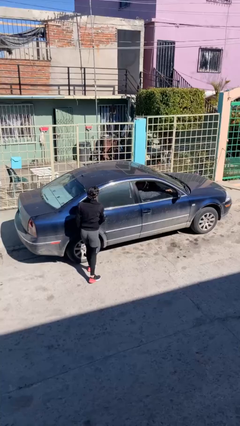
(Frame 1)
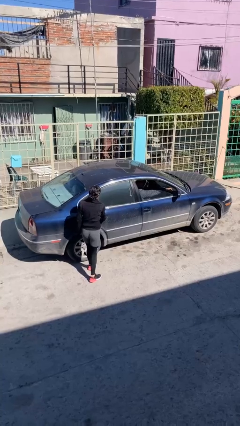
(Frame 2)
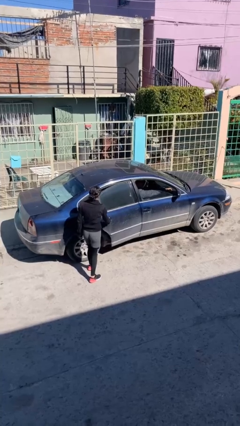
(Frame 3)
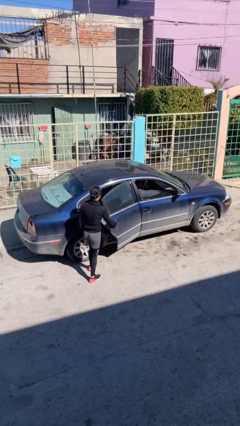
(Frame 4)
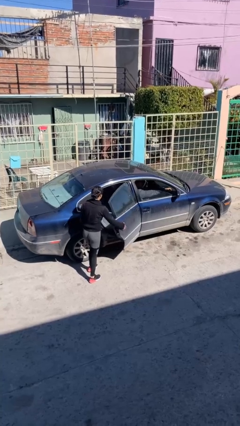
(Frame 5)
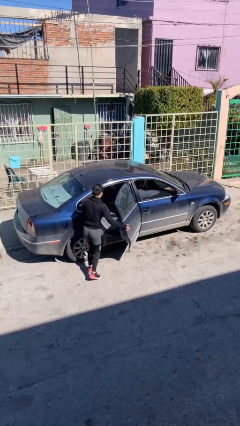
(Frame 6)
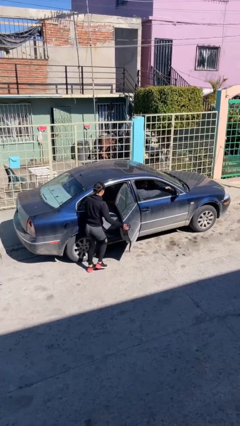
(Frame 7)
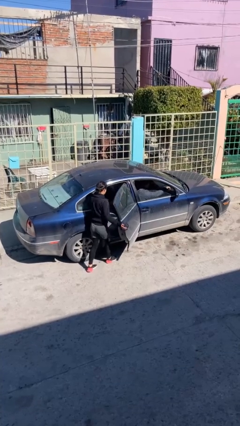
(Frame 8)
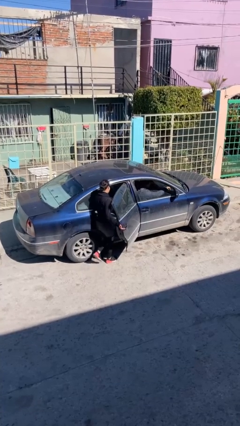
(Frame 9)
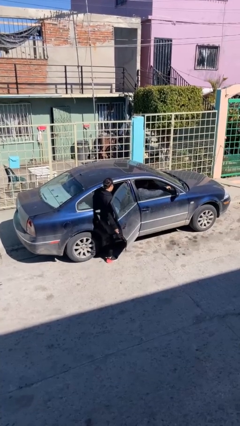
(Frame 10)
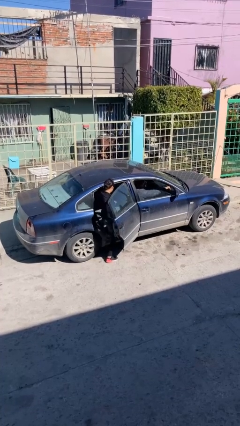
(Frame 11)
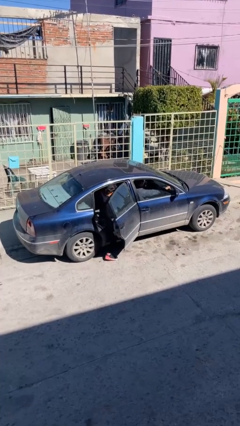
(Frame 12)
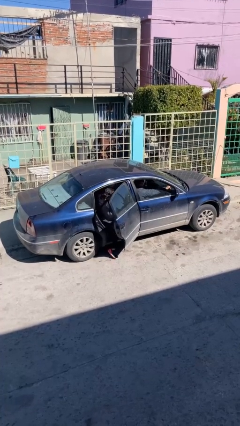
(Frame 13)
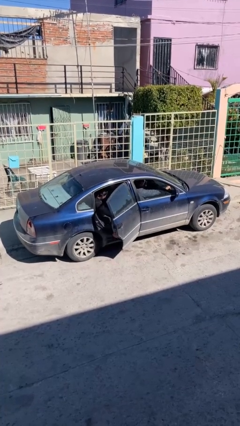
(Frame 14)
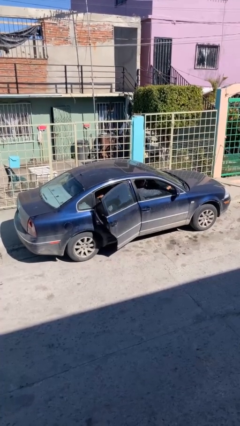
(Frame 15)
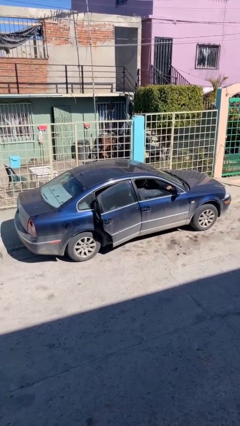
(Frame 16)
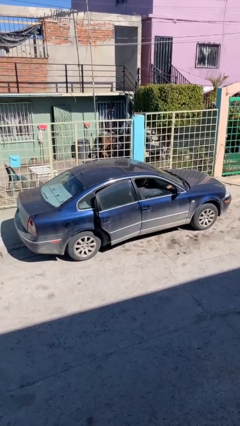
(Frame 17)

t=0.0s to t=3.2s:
car picks up person

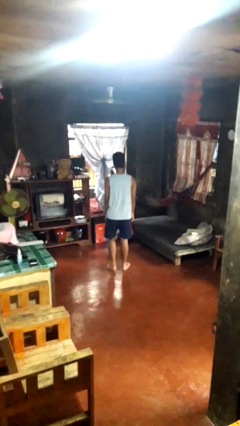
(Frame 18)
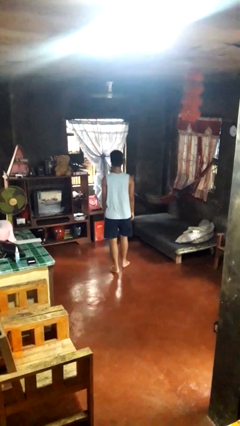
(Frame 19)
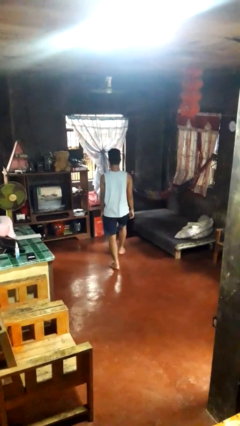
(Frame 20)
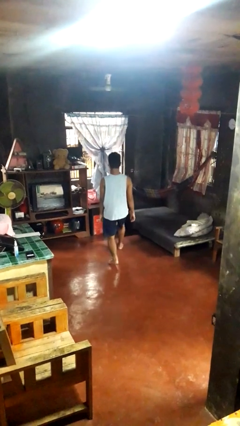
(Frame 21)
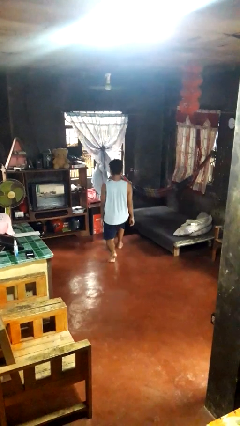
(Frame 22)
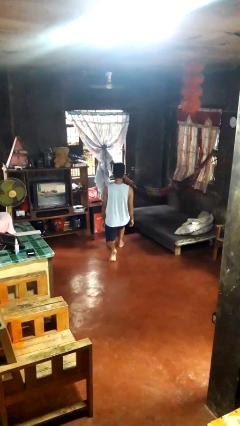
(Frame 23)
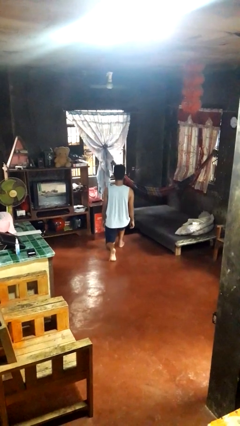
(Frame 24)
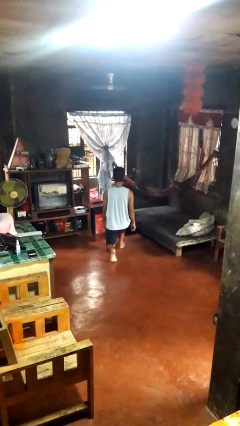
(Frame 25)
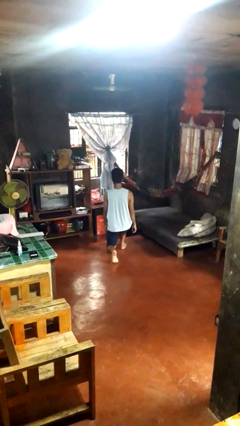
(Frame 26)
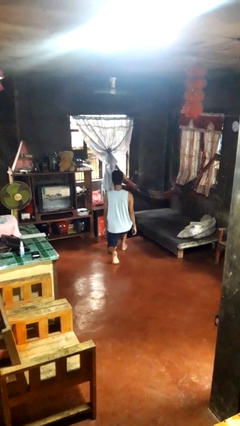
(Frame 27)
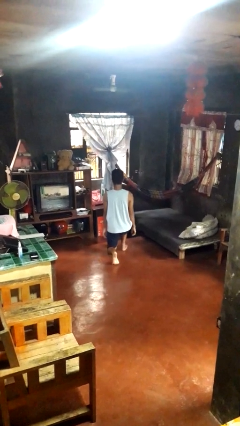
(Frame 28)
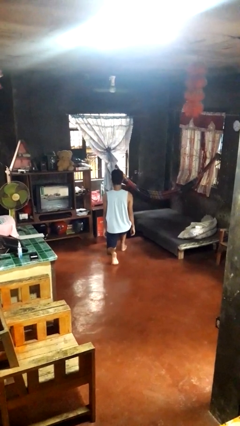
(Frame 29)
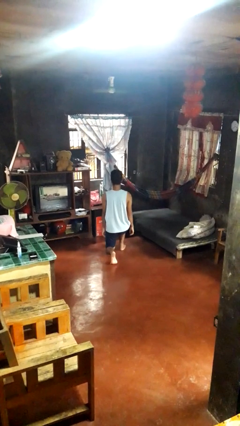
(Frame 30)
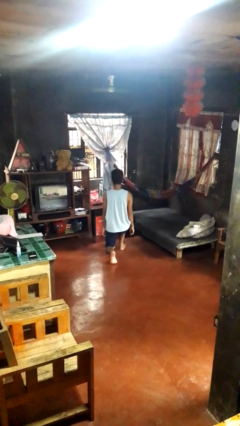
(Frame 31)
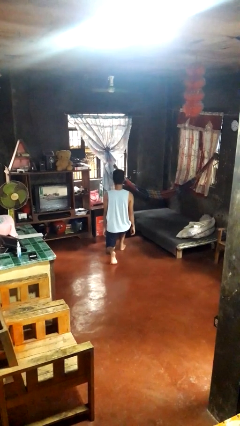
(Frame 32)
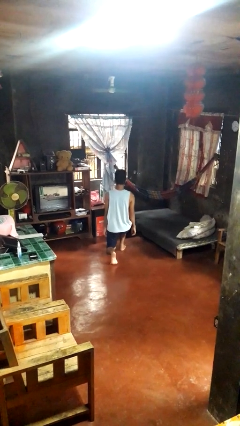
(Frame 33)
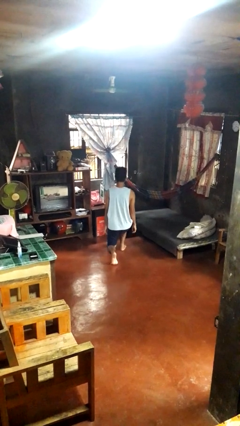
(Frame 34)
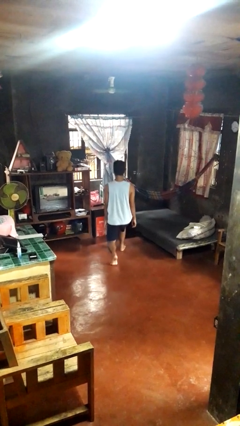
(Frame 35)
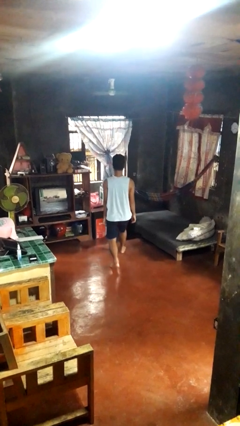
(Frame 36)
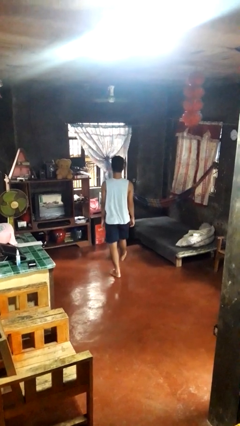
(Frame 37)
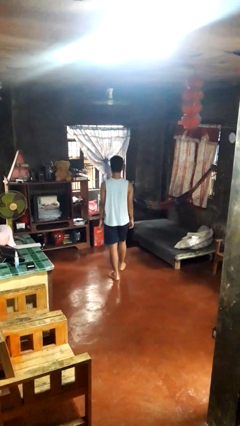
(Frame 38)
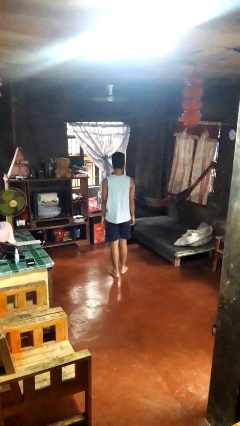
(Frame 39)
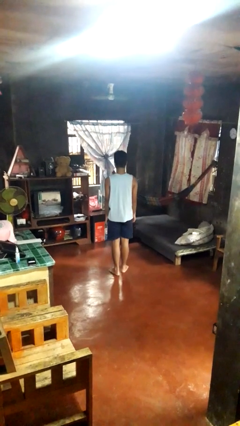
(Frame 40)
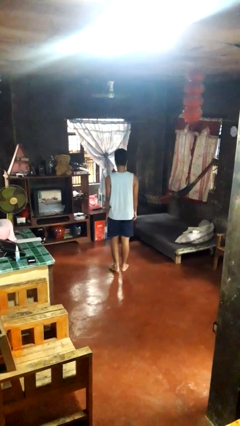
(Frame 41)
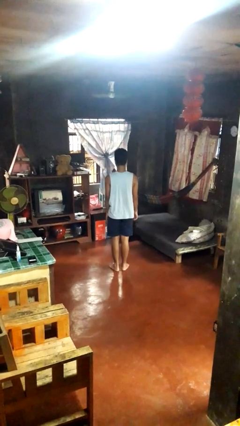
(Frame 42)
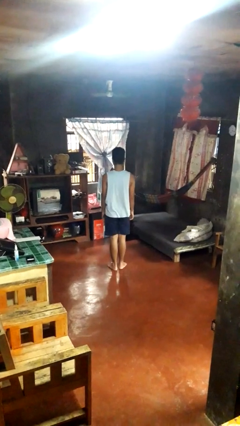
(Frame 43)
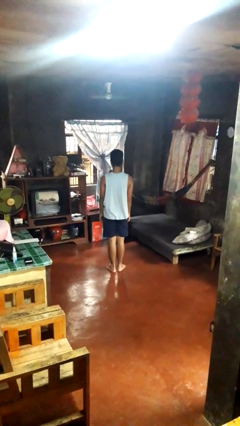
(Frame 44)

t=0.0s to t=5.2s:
person exercises with lunges

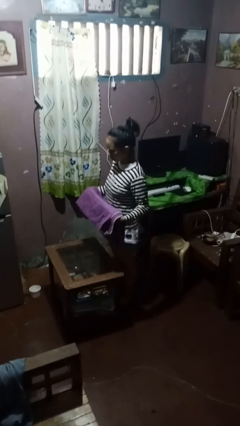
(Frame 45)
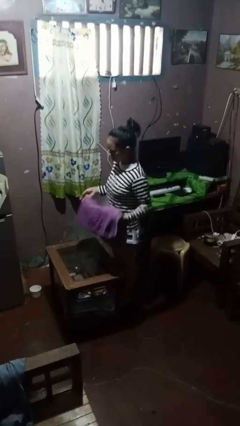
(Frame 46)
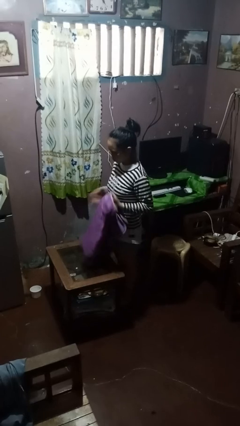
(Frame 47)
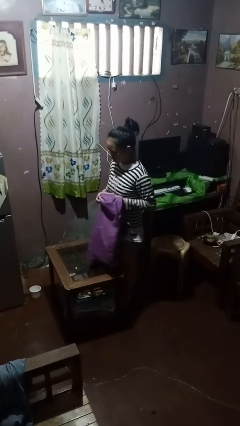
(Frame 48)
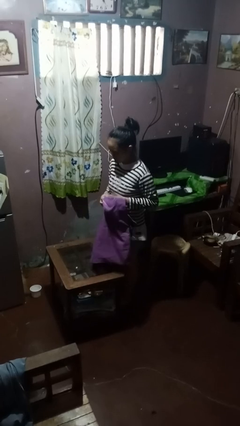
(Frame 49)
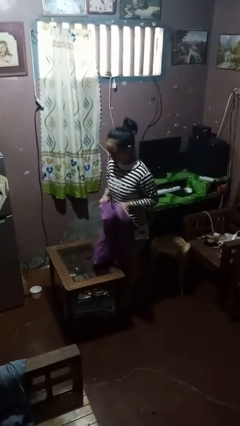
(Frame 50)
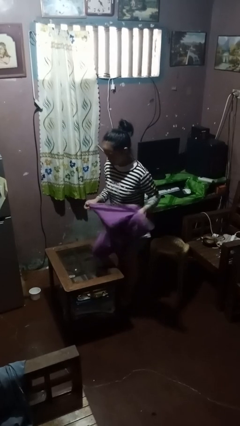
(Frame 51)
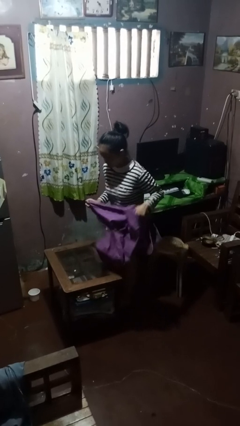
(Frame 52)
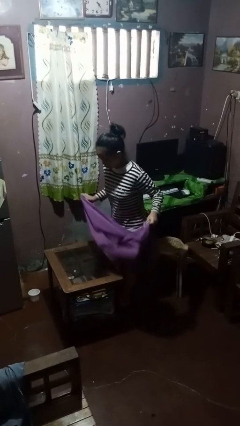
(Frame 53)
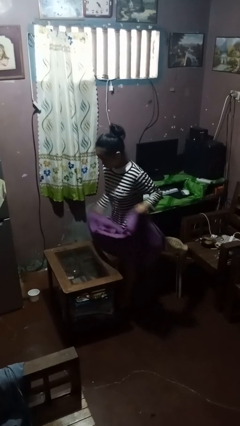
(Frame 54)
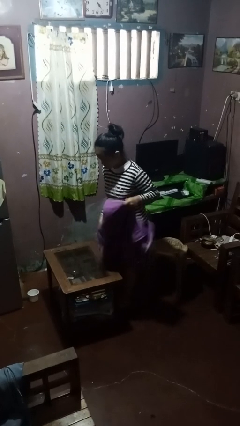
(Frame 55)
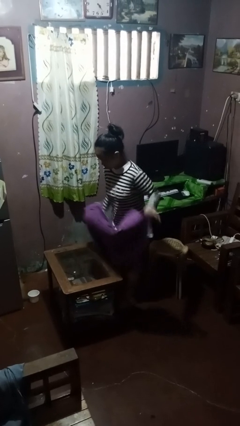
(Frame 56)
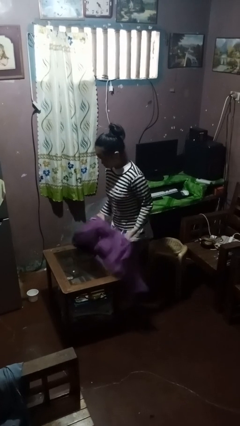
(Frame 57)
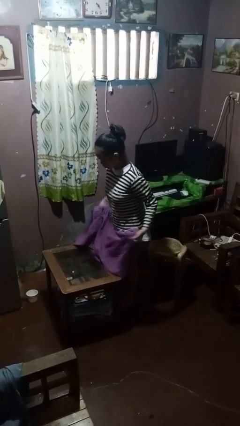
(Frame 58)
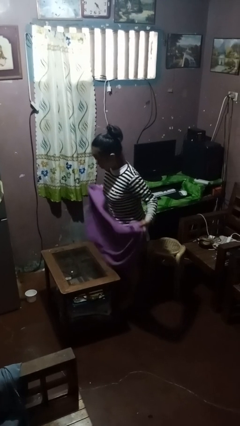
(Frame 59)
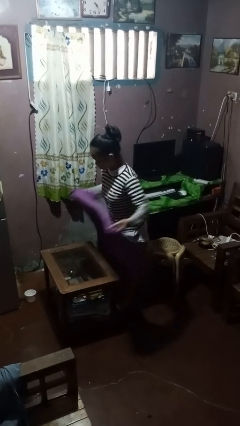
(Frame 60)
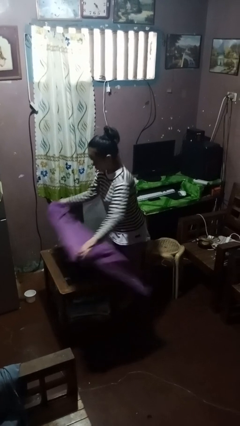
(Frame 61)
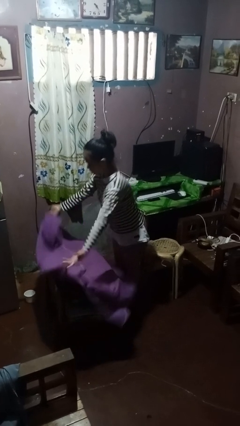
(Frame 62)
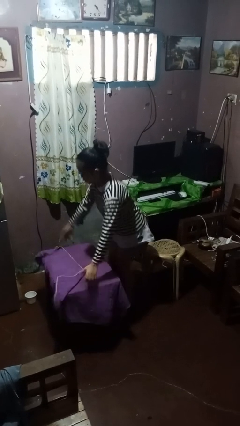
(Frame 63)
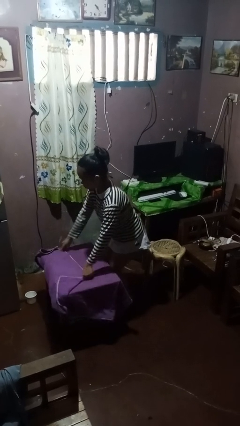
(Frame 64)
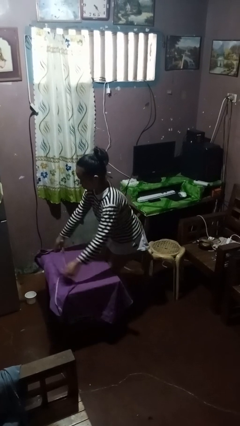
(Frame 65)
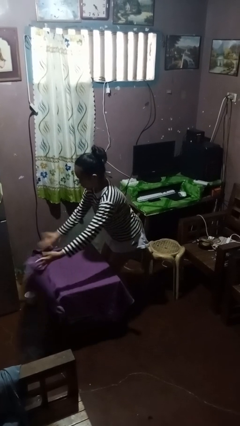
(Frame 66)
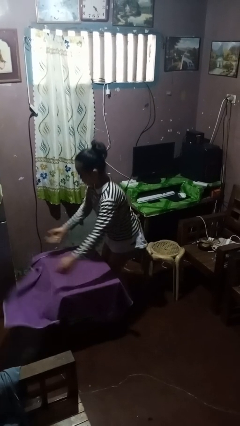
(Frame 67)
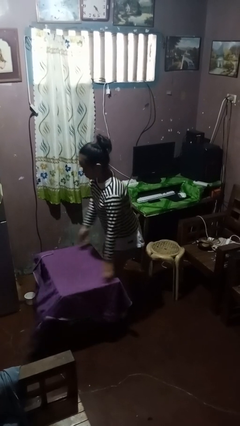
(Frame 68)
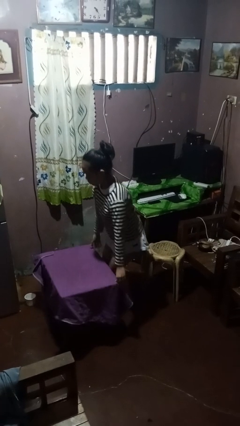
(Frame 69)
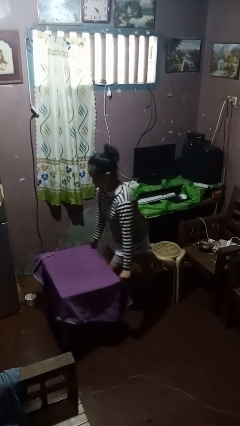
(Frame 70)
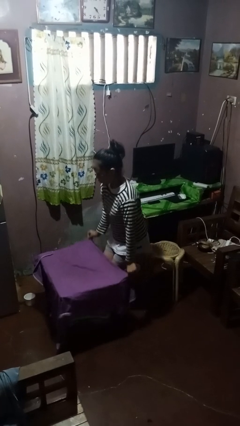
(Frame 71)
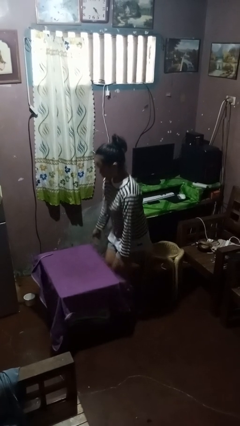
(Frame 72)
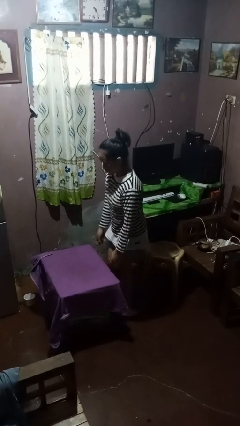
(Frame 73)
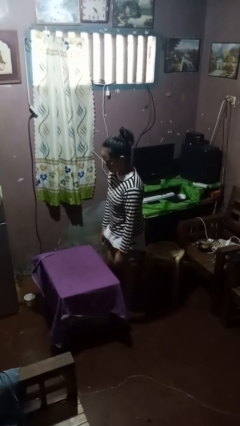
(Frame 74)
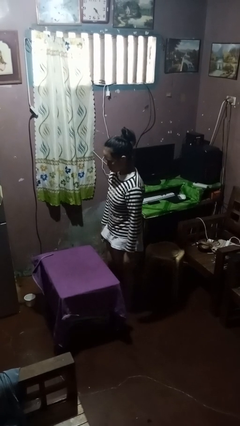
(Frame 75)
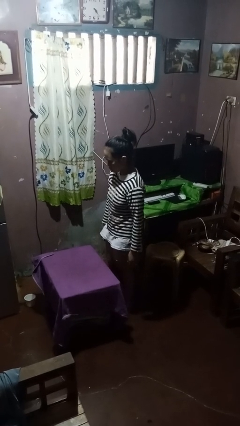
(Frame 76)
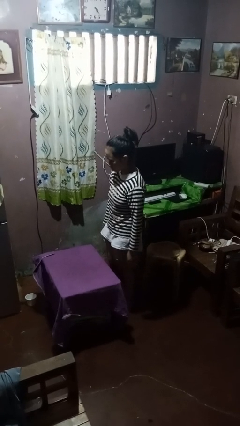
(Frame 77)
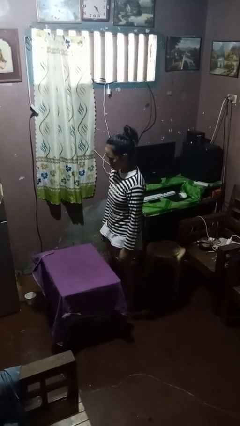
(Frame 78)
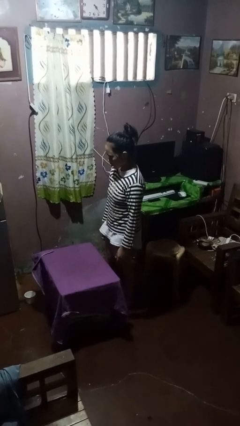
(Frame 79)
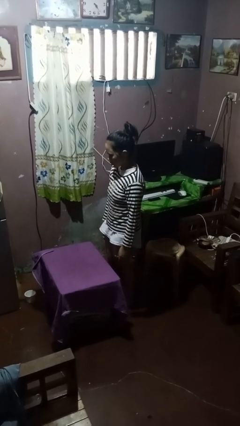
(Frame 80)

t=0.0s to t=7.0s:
person spreads tablecloth

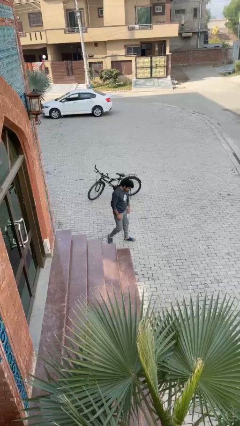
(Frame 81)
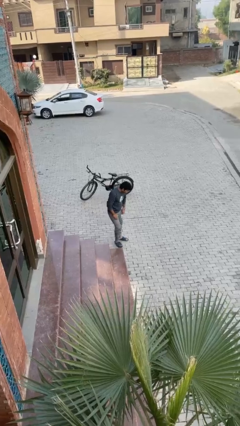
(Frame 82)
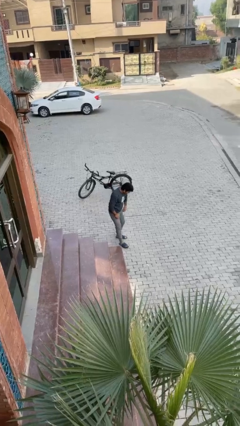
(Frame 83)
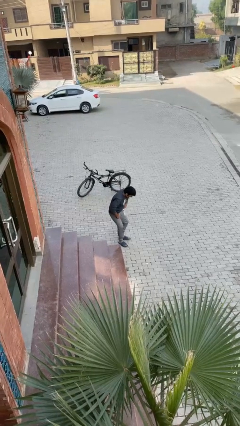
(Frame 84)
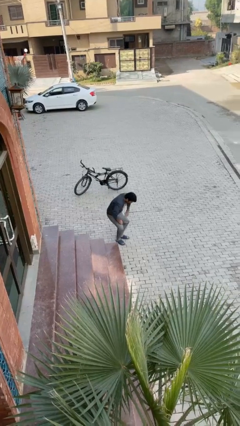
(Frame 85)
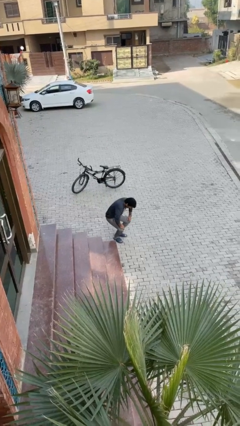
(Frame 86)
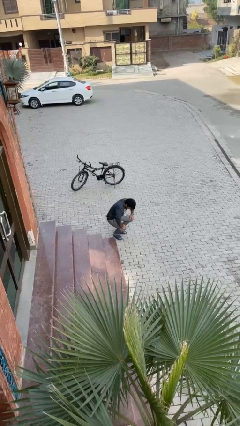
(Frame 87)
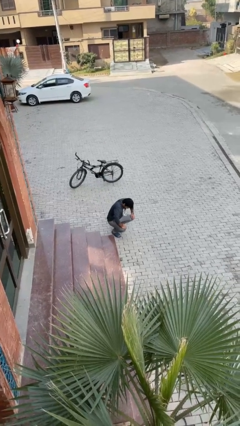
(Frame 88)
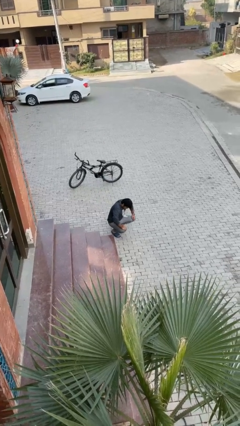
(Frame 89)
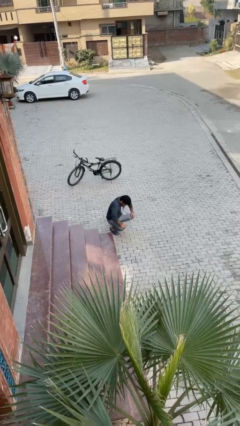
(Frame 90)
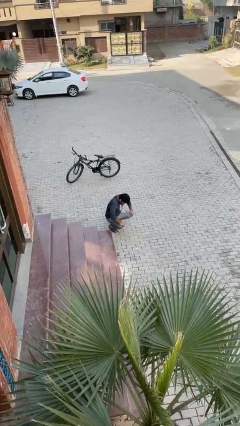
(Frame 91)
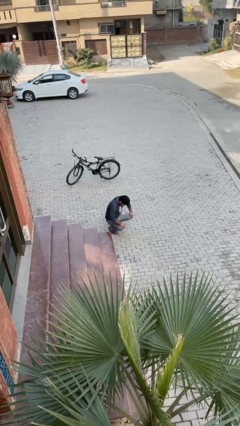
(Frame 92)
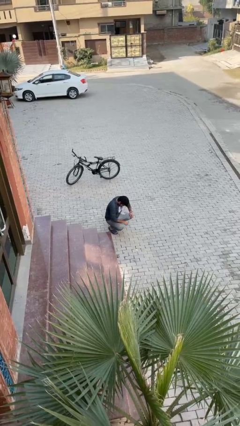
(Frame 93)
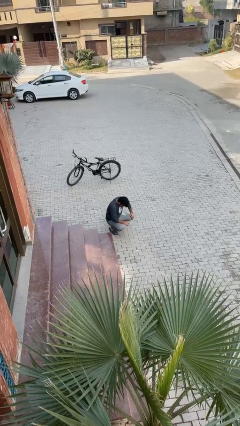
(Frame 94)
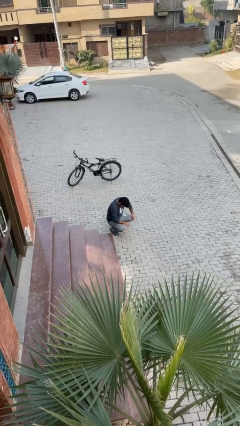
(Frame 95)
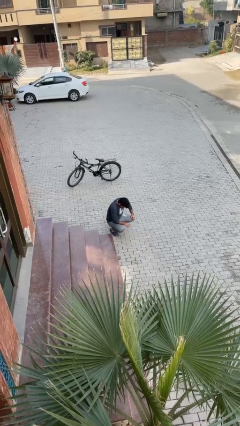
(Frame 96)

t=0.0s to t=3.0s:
person sits down
